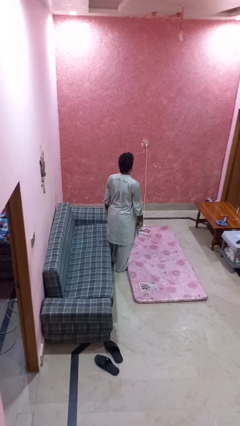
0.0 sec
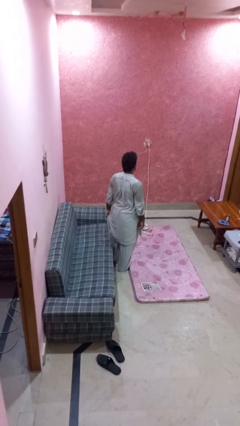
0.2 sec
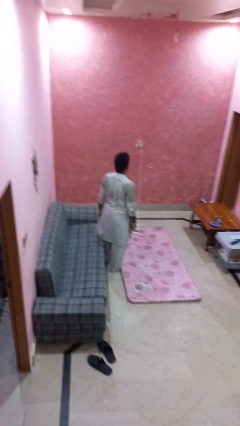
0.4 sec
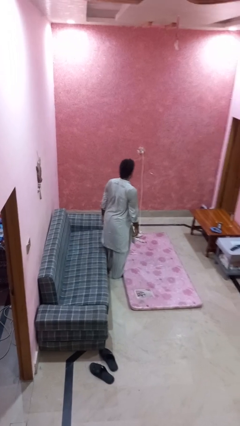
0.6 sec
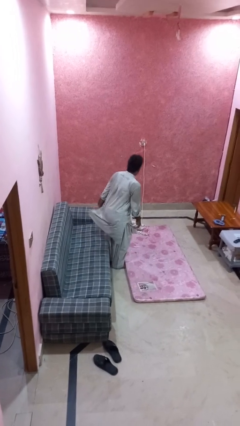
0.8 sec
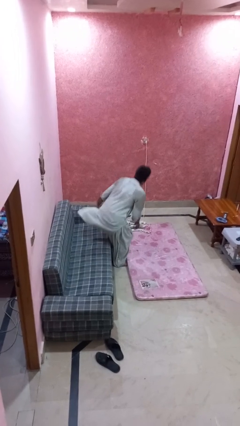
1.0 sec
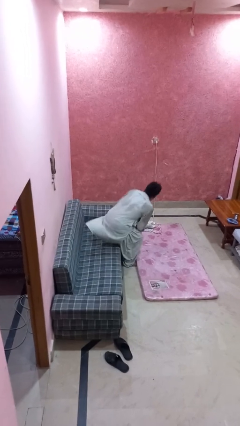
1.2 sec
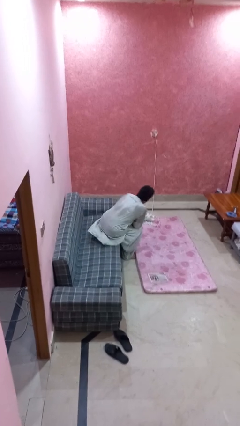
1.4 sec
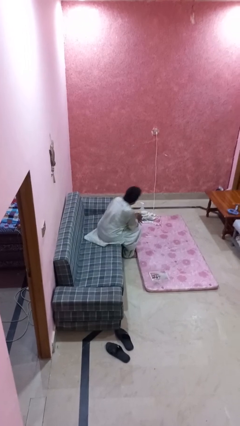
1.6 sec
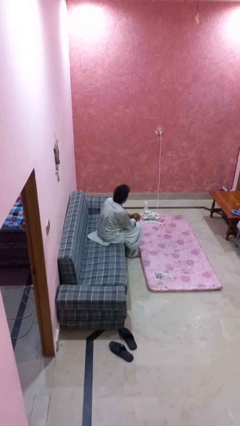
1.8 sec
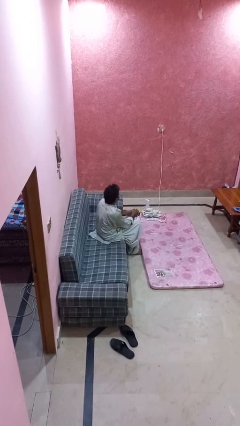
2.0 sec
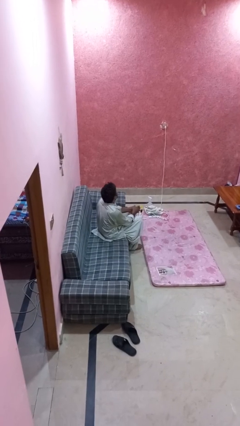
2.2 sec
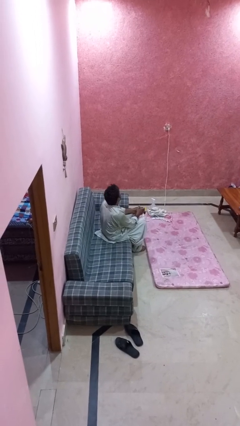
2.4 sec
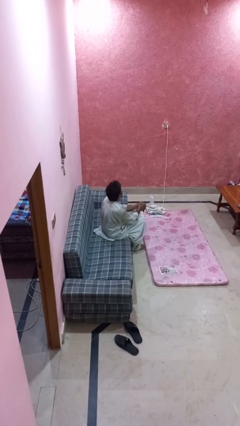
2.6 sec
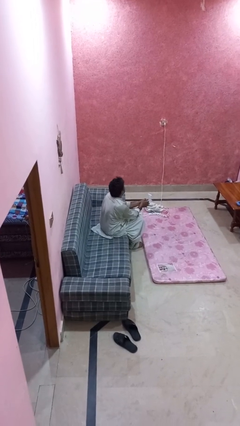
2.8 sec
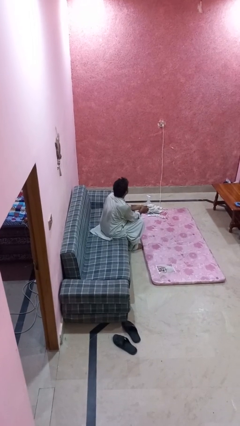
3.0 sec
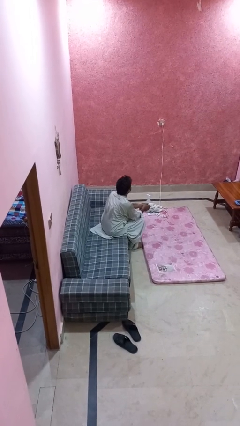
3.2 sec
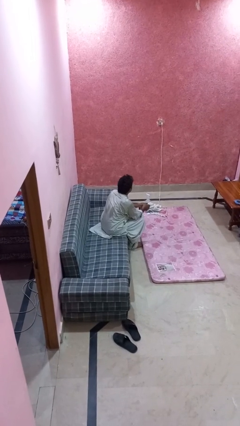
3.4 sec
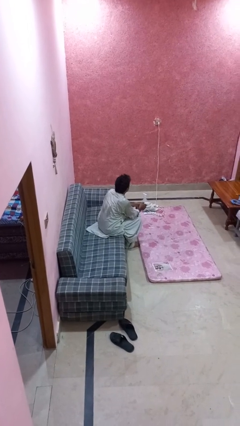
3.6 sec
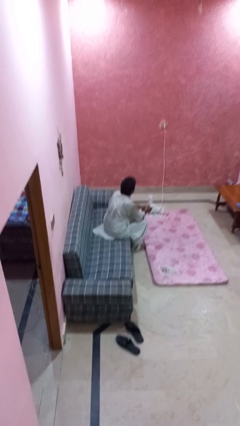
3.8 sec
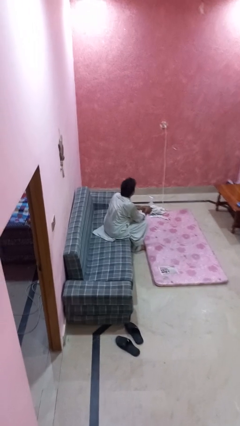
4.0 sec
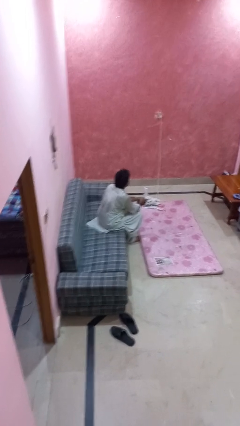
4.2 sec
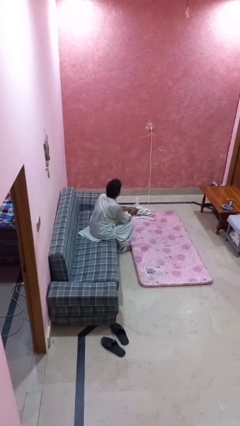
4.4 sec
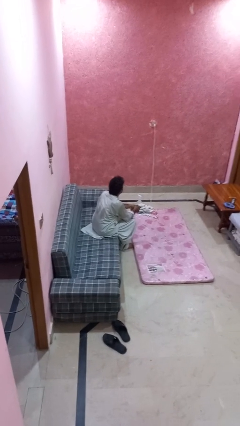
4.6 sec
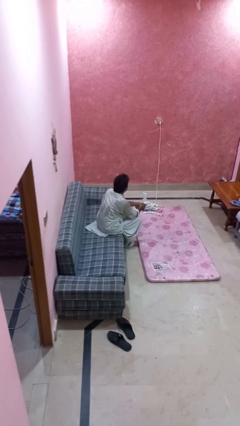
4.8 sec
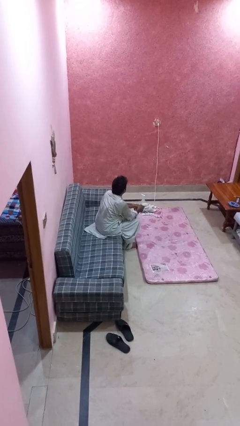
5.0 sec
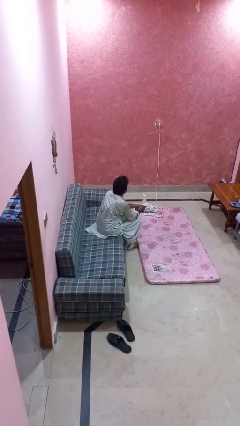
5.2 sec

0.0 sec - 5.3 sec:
person sits down

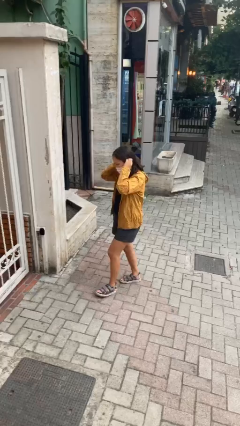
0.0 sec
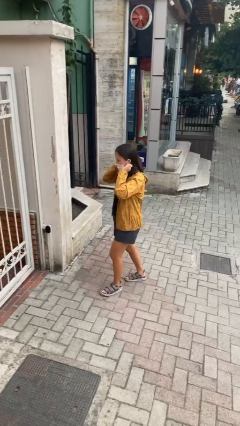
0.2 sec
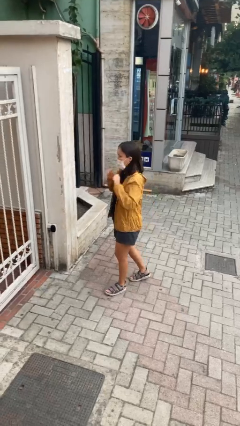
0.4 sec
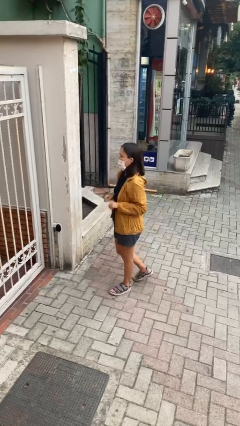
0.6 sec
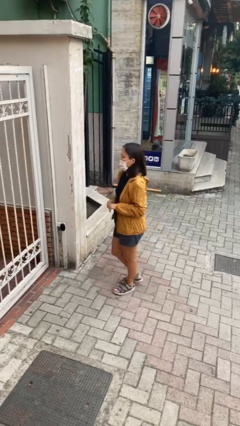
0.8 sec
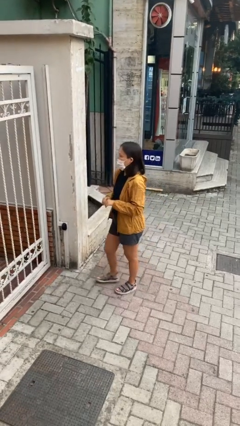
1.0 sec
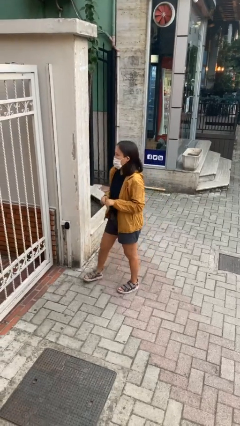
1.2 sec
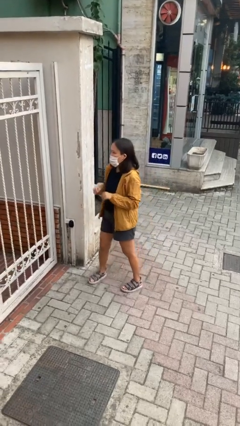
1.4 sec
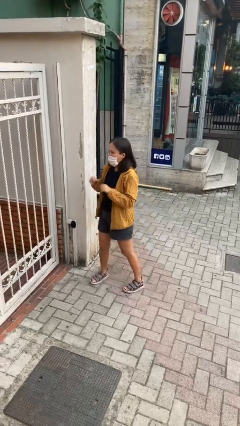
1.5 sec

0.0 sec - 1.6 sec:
person puts on facemask

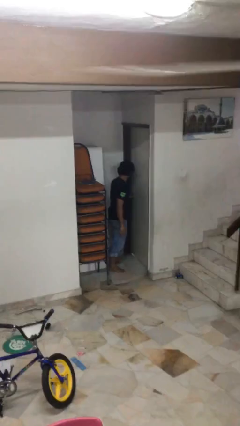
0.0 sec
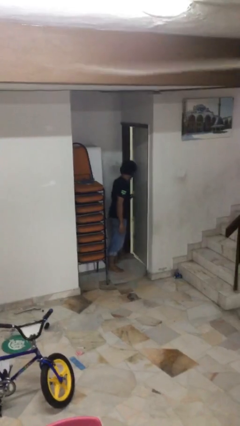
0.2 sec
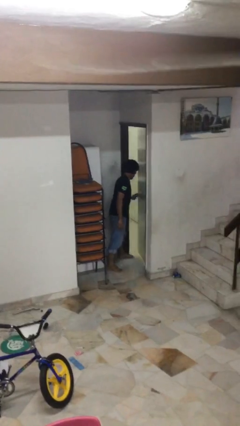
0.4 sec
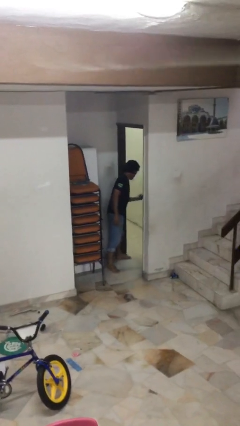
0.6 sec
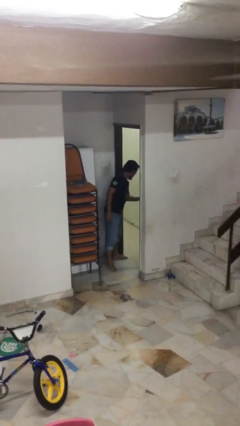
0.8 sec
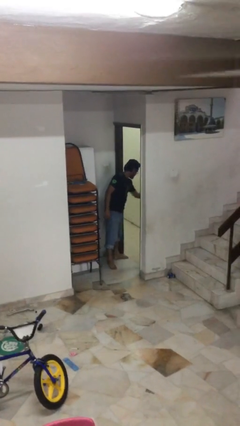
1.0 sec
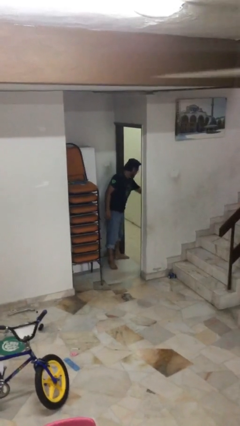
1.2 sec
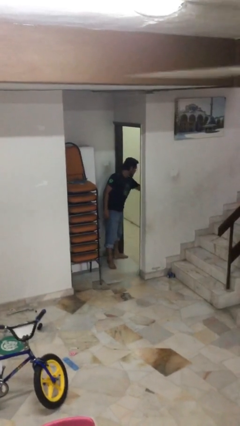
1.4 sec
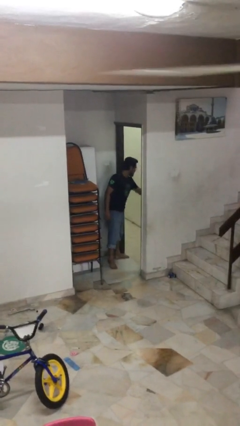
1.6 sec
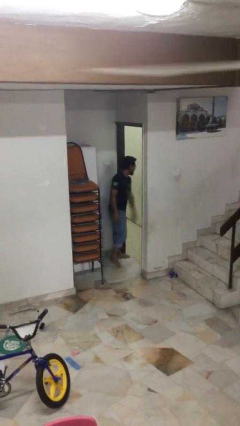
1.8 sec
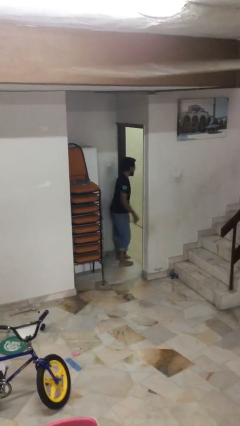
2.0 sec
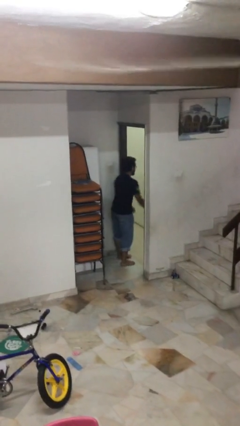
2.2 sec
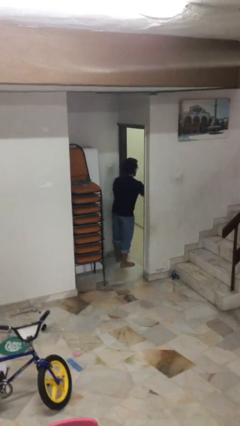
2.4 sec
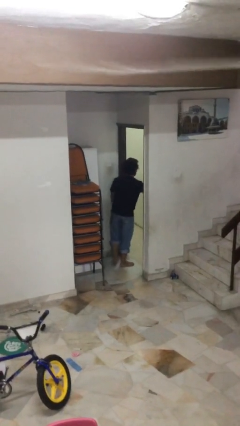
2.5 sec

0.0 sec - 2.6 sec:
person opens facility door

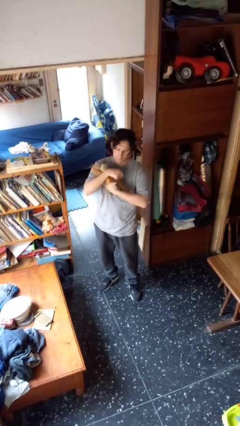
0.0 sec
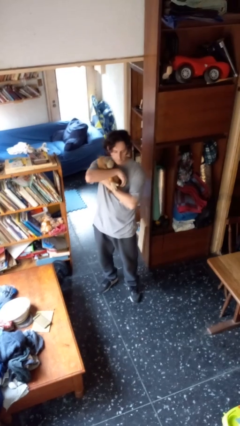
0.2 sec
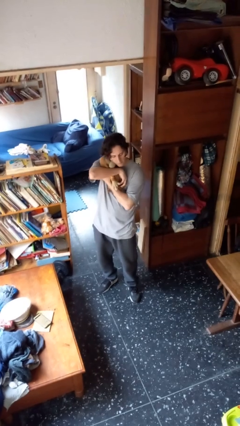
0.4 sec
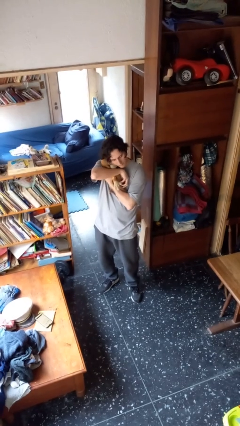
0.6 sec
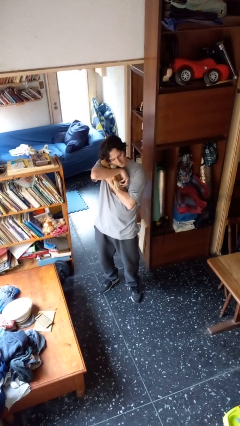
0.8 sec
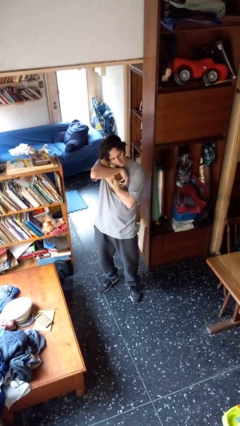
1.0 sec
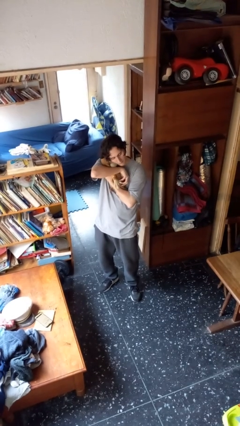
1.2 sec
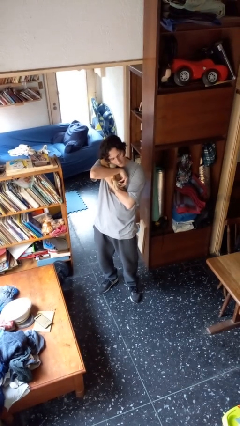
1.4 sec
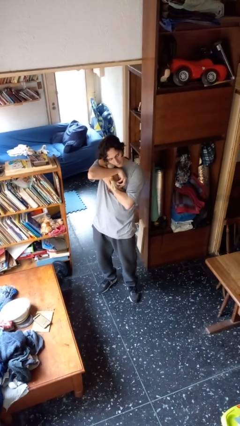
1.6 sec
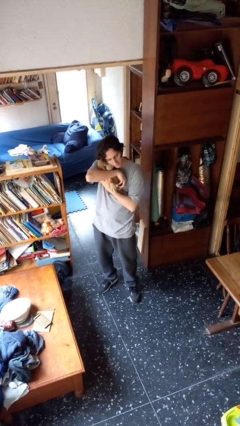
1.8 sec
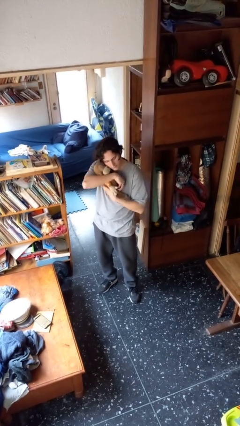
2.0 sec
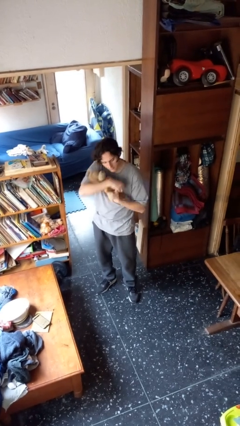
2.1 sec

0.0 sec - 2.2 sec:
person hugs stuffed animal

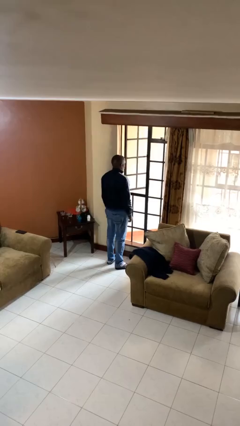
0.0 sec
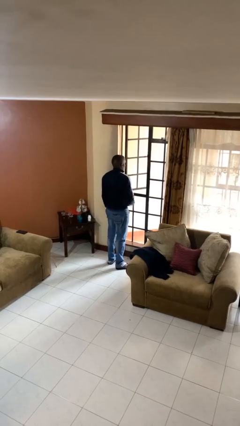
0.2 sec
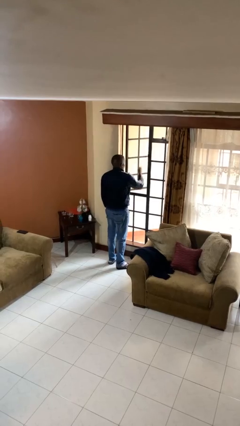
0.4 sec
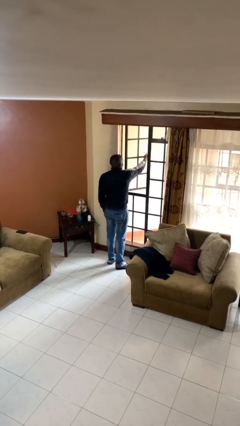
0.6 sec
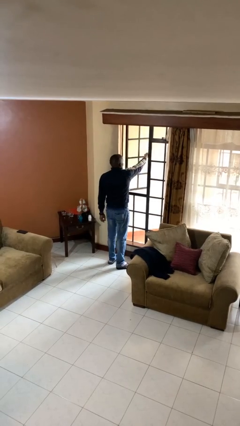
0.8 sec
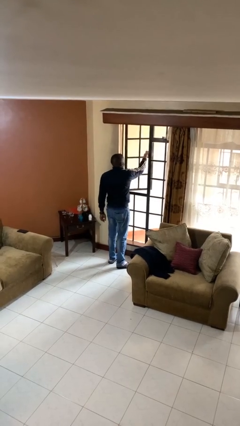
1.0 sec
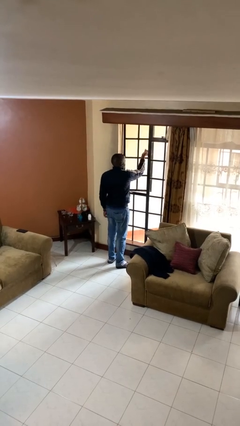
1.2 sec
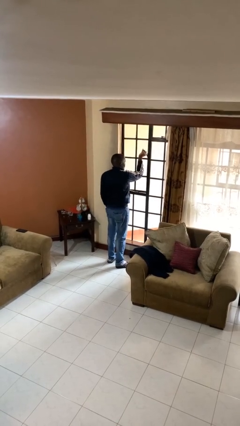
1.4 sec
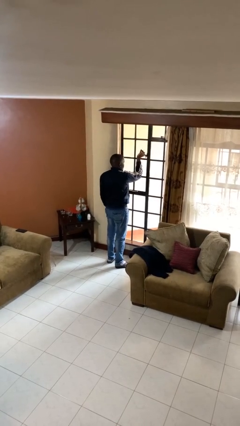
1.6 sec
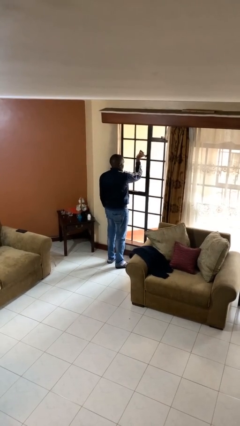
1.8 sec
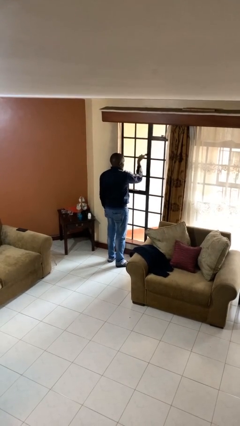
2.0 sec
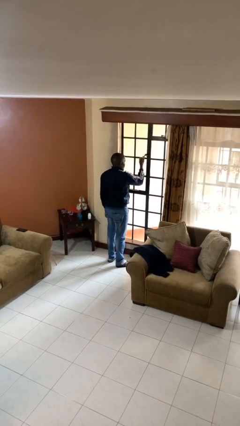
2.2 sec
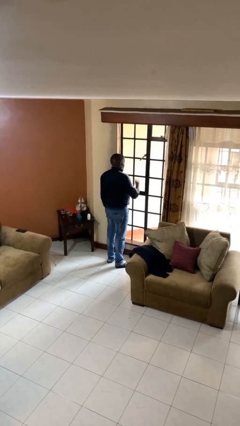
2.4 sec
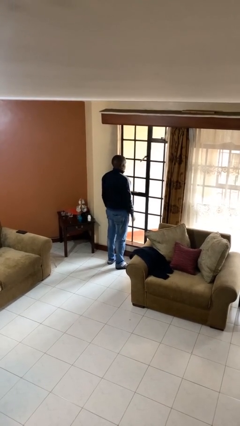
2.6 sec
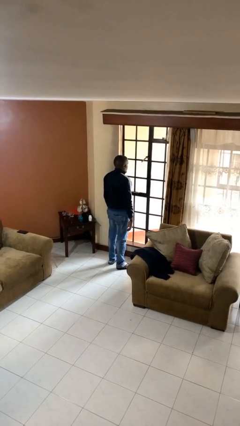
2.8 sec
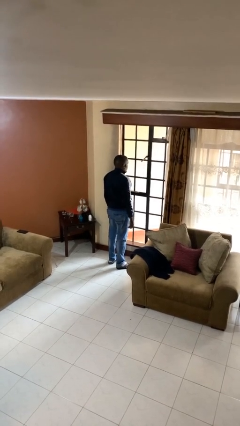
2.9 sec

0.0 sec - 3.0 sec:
person closes home window

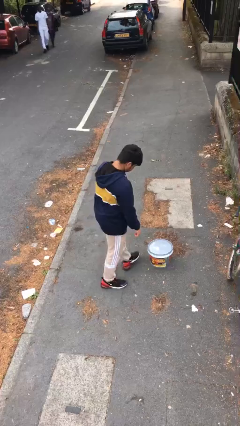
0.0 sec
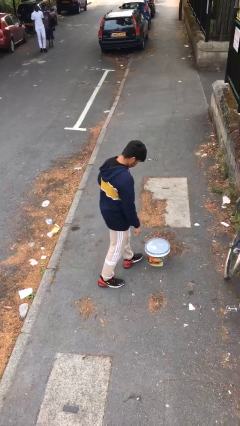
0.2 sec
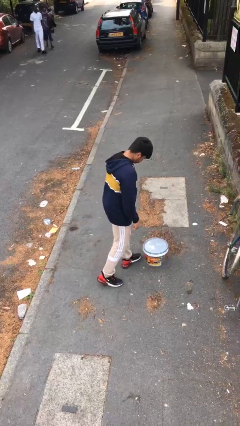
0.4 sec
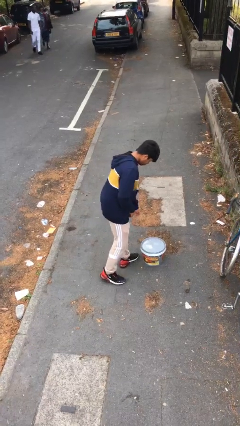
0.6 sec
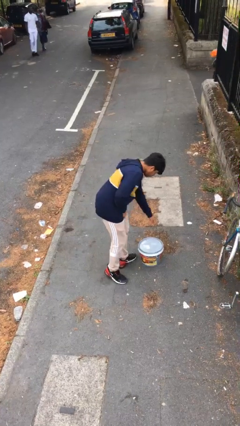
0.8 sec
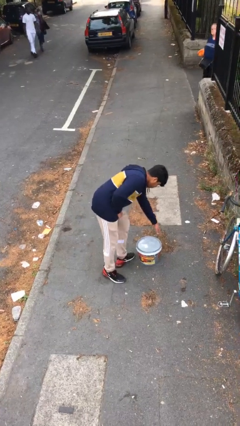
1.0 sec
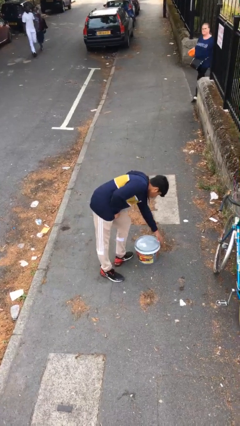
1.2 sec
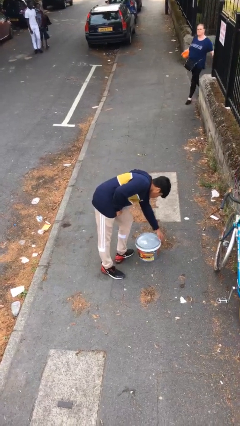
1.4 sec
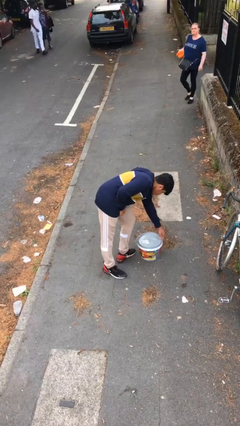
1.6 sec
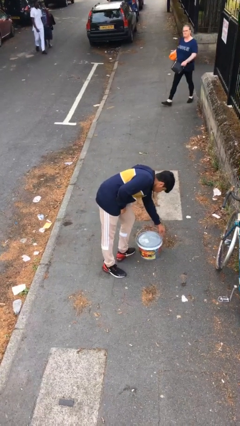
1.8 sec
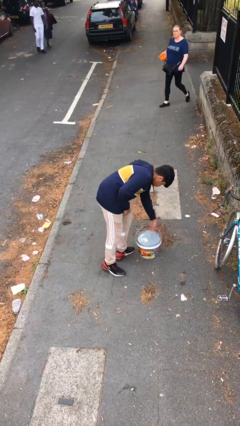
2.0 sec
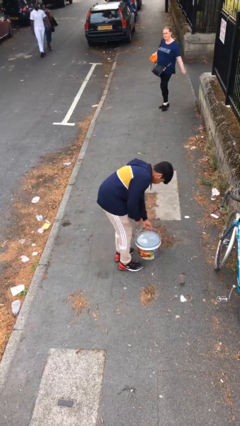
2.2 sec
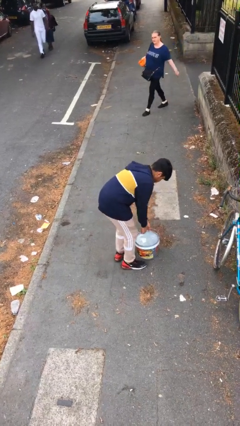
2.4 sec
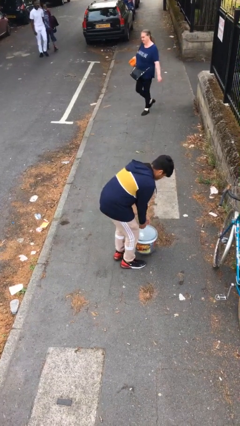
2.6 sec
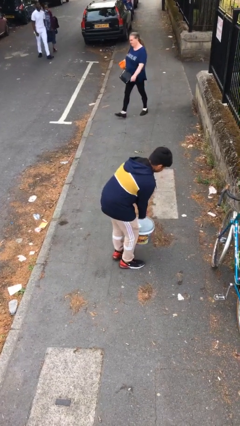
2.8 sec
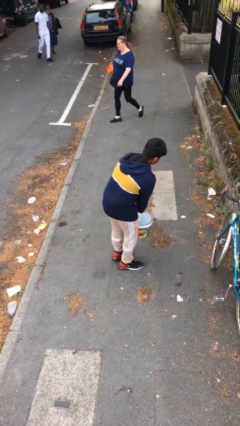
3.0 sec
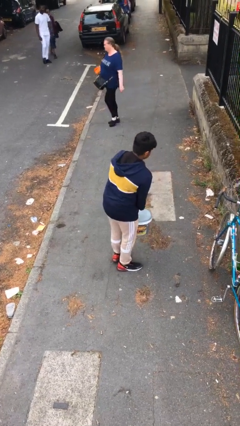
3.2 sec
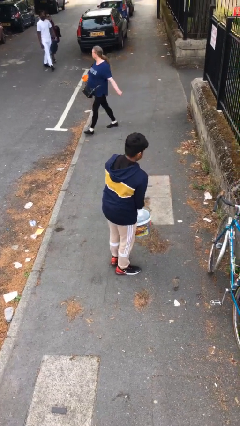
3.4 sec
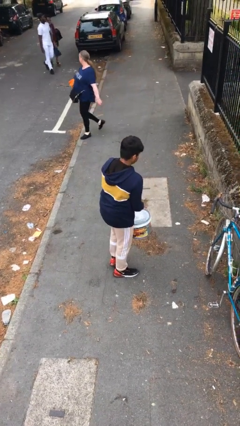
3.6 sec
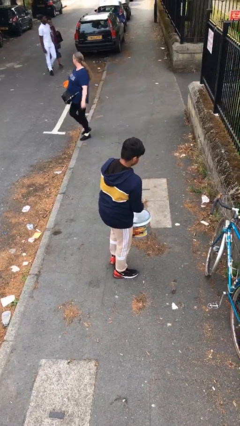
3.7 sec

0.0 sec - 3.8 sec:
person picks up object from floor
